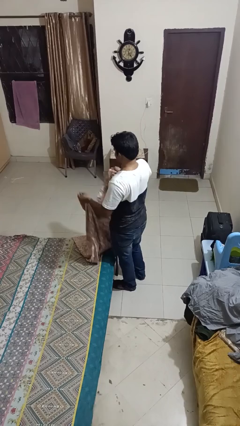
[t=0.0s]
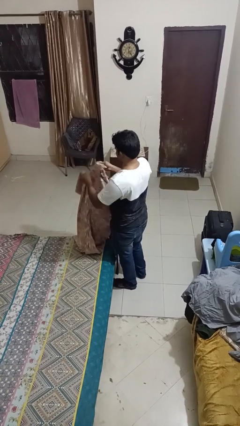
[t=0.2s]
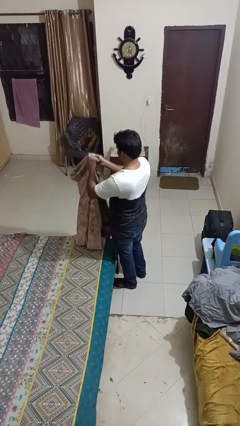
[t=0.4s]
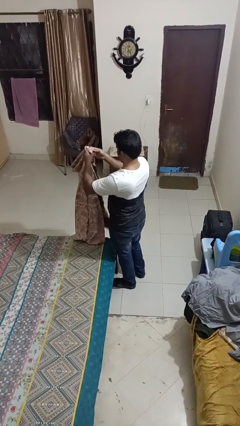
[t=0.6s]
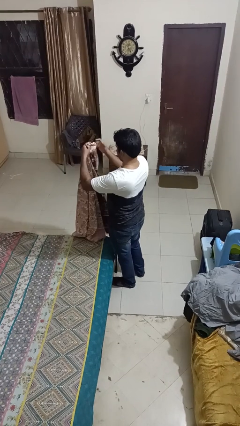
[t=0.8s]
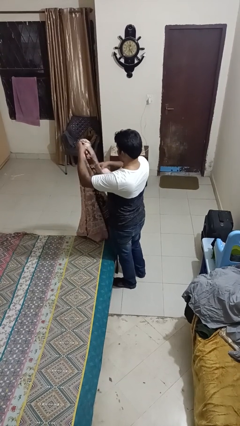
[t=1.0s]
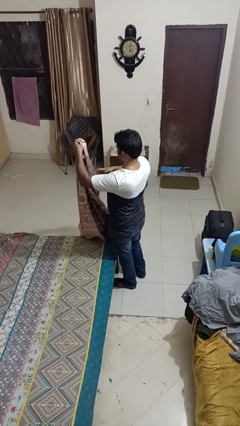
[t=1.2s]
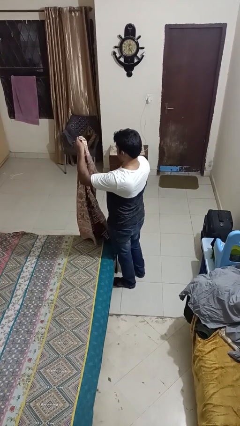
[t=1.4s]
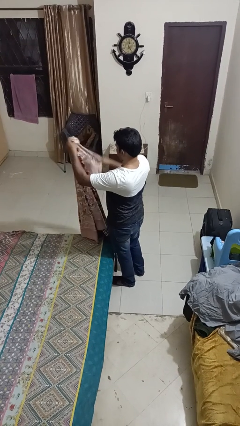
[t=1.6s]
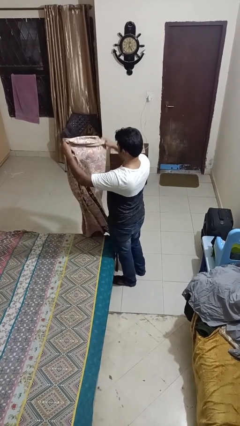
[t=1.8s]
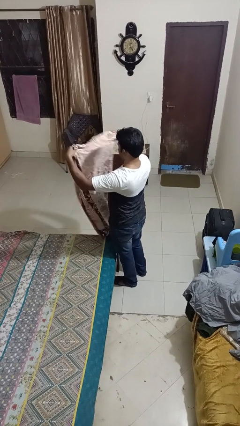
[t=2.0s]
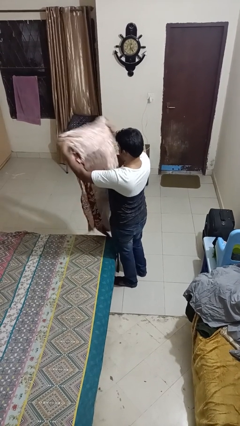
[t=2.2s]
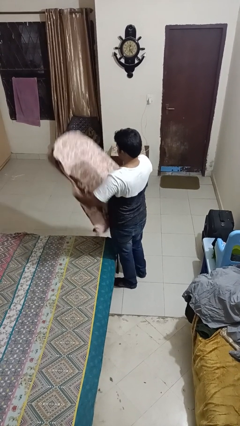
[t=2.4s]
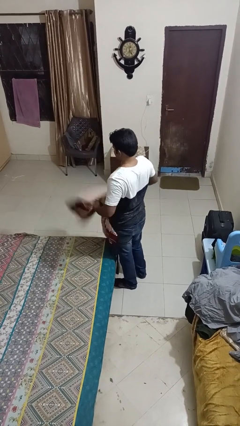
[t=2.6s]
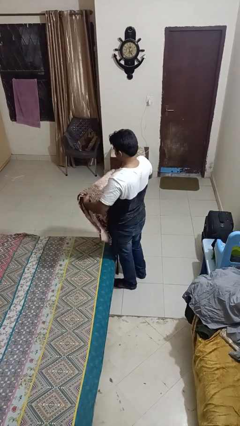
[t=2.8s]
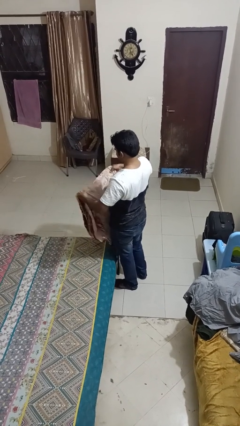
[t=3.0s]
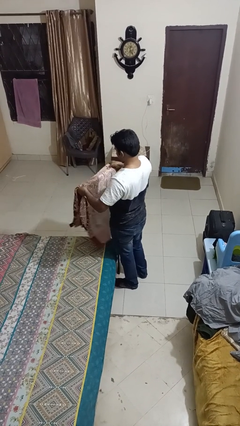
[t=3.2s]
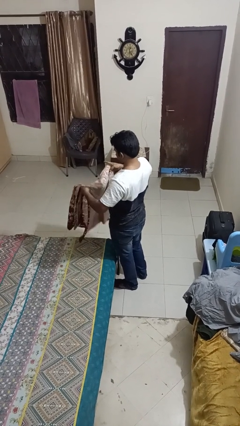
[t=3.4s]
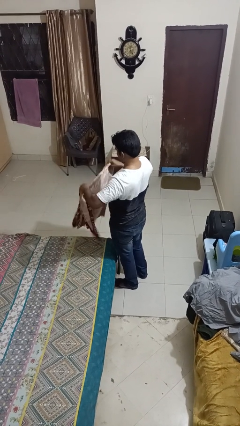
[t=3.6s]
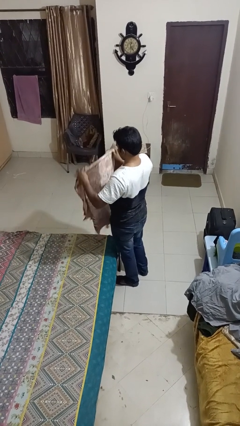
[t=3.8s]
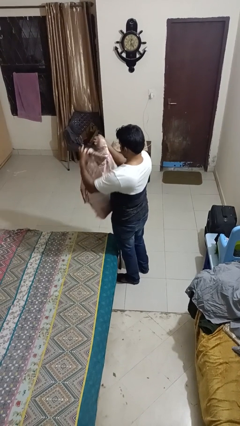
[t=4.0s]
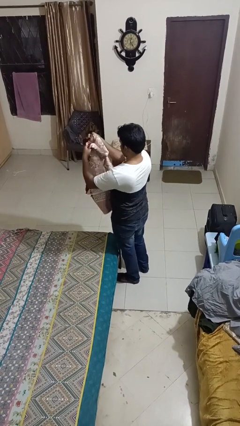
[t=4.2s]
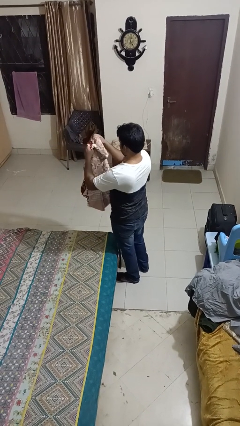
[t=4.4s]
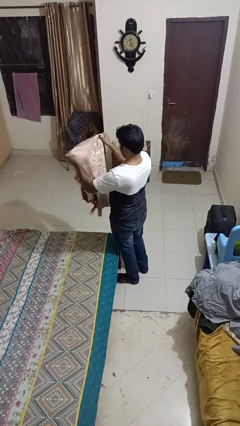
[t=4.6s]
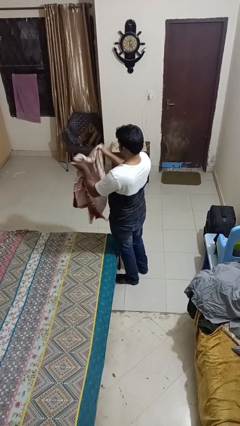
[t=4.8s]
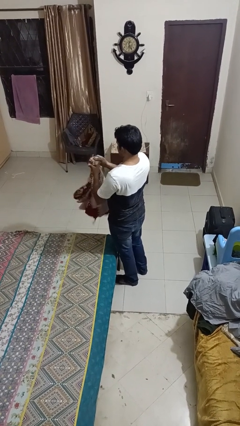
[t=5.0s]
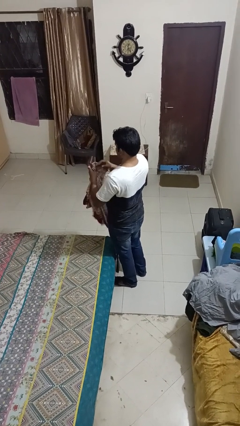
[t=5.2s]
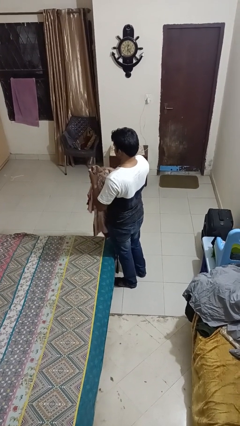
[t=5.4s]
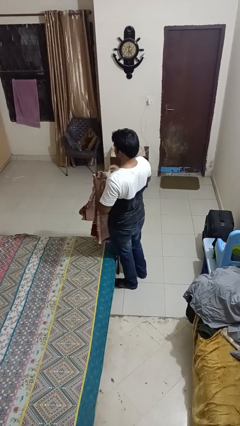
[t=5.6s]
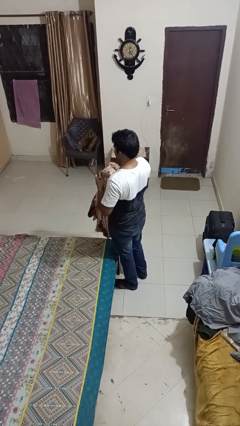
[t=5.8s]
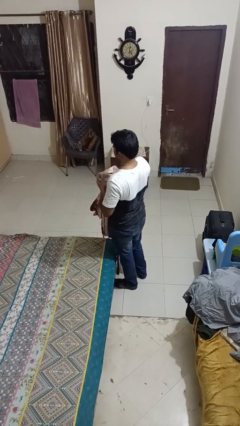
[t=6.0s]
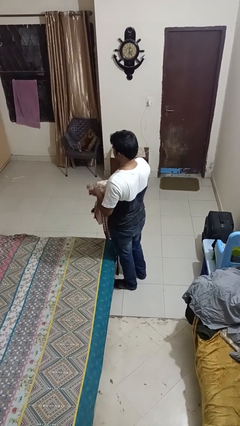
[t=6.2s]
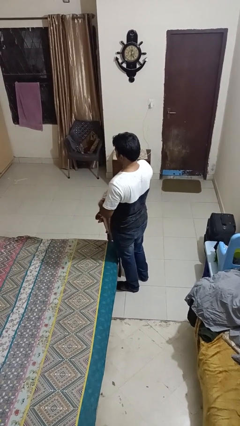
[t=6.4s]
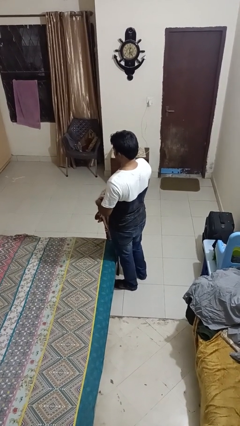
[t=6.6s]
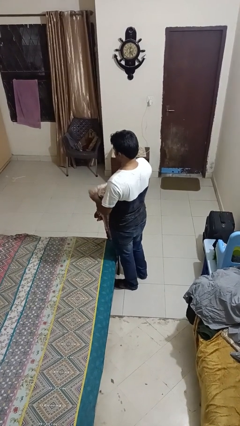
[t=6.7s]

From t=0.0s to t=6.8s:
person folds blanket

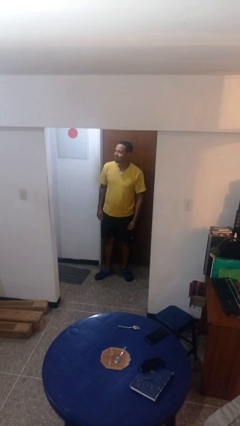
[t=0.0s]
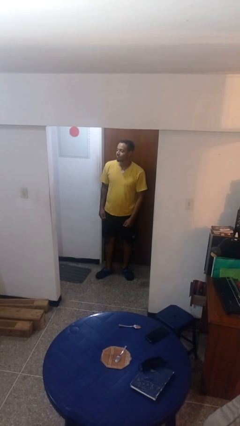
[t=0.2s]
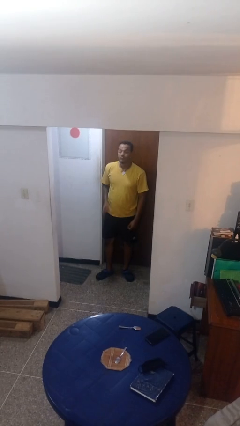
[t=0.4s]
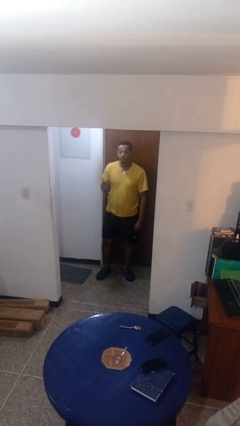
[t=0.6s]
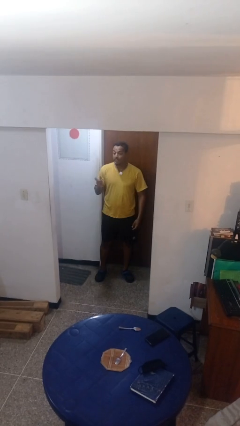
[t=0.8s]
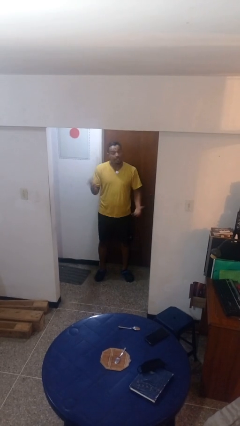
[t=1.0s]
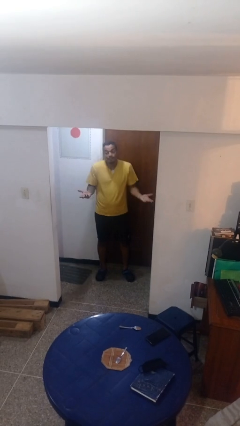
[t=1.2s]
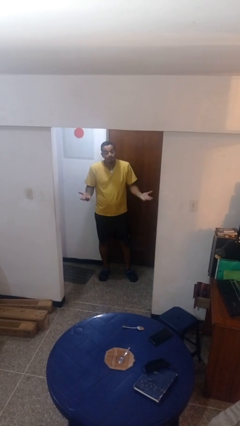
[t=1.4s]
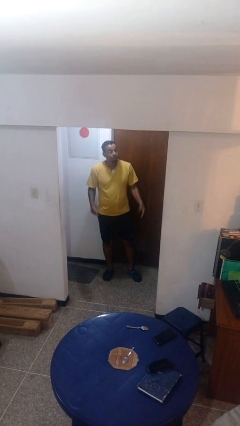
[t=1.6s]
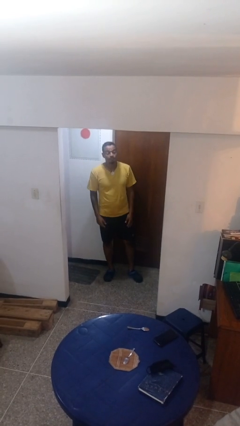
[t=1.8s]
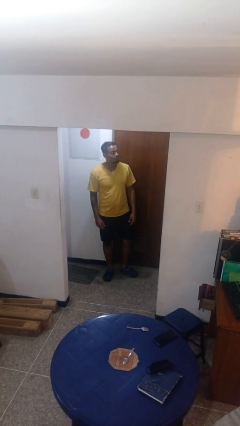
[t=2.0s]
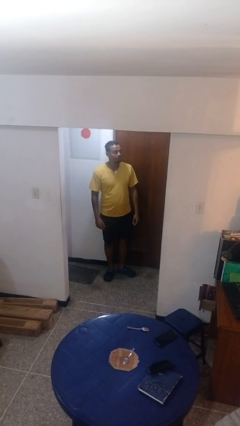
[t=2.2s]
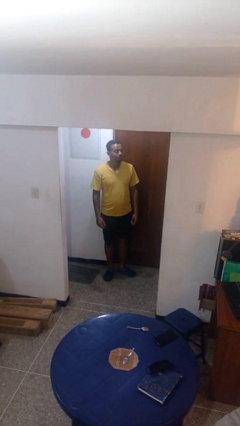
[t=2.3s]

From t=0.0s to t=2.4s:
person shakes head

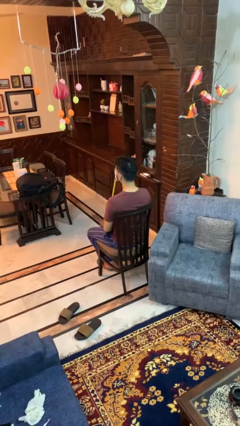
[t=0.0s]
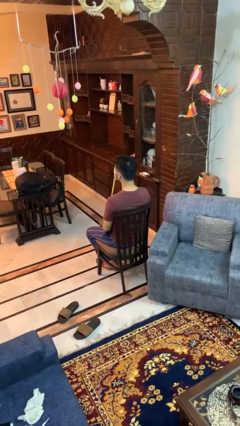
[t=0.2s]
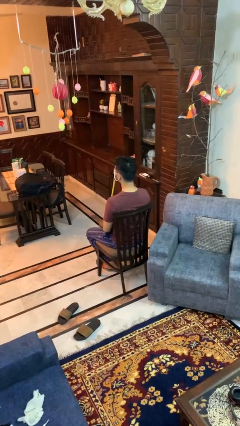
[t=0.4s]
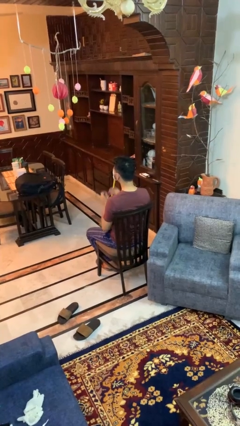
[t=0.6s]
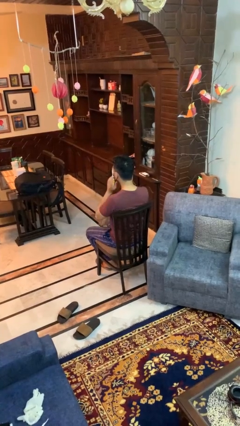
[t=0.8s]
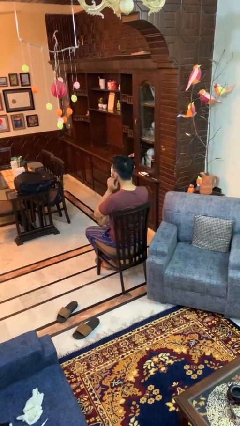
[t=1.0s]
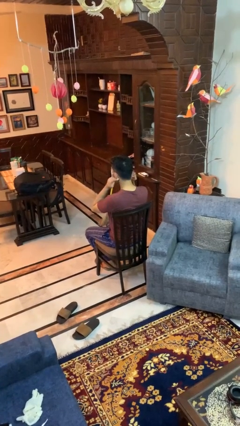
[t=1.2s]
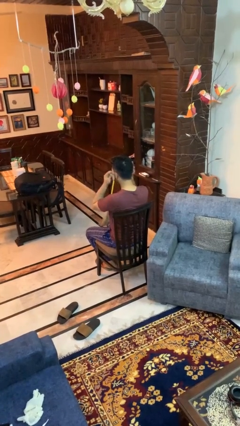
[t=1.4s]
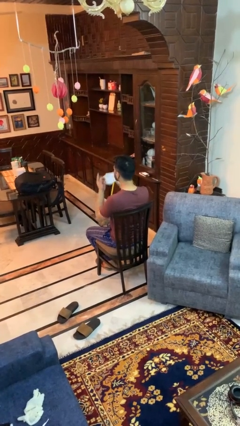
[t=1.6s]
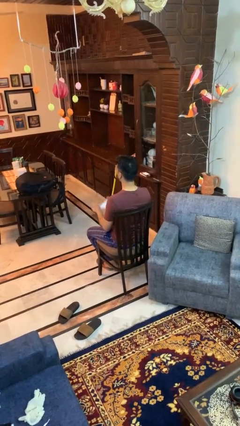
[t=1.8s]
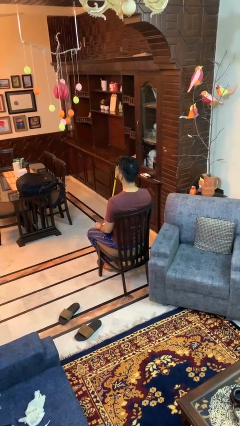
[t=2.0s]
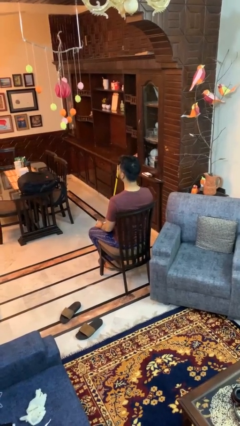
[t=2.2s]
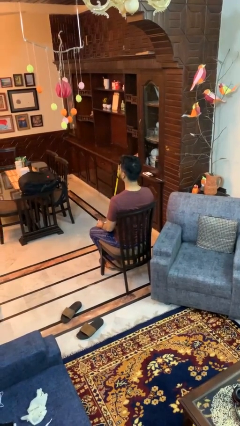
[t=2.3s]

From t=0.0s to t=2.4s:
person takes off facemask

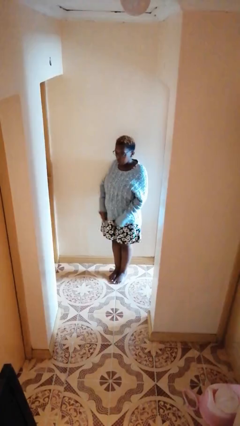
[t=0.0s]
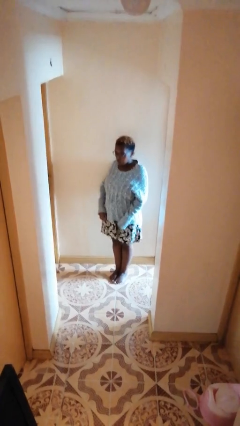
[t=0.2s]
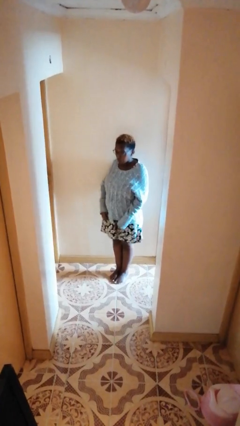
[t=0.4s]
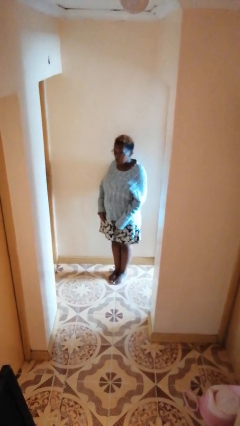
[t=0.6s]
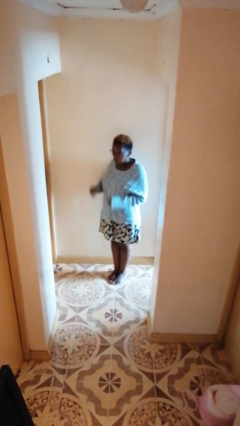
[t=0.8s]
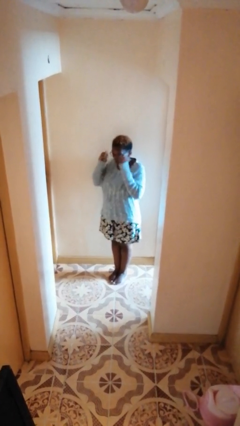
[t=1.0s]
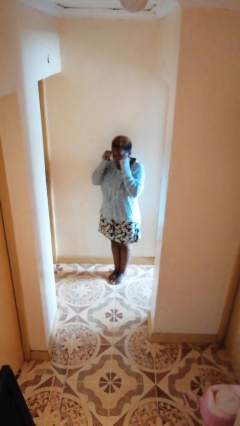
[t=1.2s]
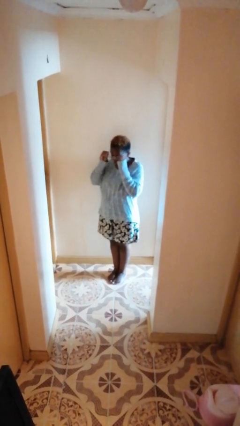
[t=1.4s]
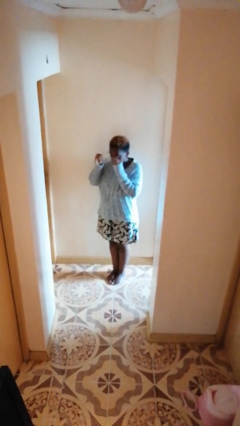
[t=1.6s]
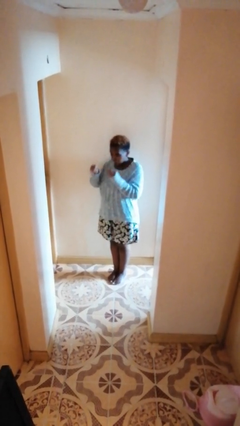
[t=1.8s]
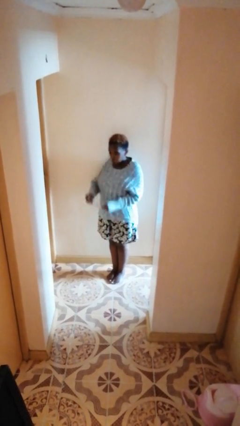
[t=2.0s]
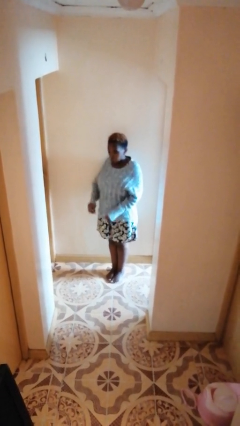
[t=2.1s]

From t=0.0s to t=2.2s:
person takes off glasses

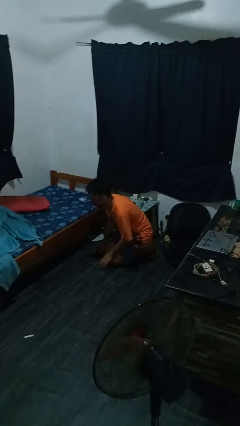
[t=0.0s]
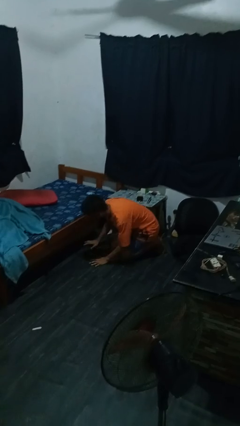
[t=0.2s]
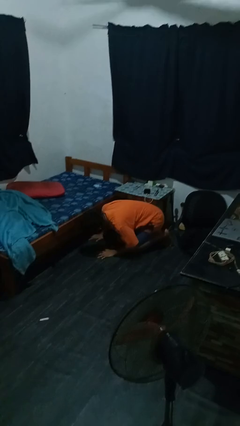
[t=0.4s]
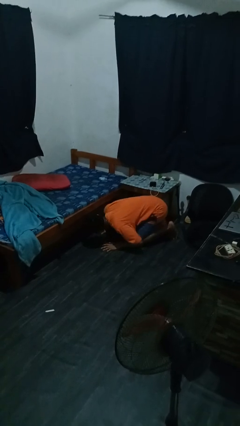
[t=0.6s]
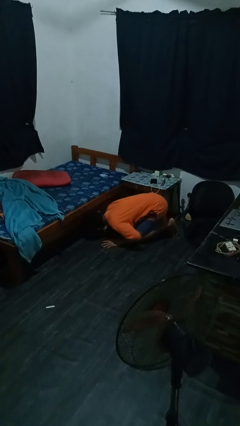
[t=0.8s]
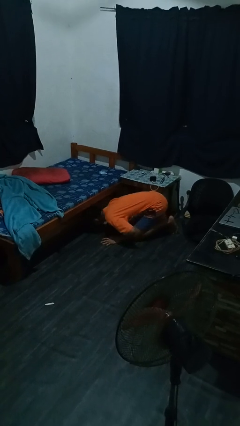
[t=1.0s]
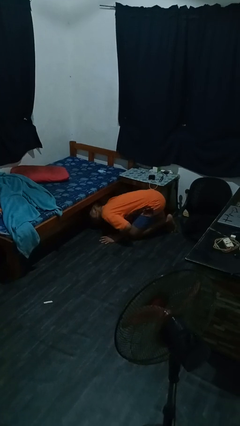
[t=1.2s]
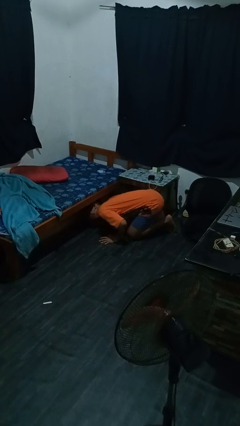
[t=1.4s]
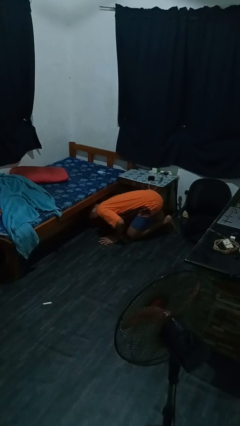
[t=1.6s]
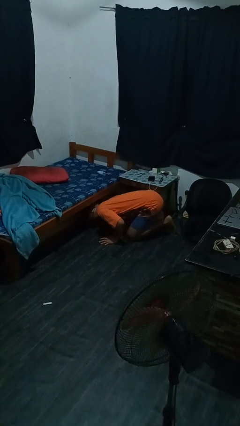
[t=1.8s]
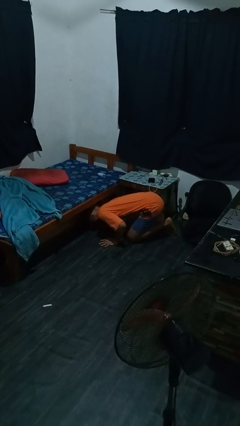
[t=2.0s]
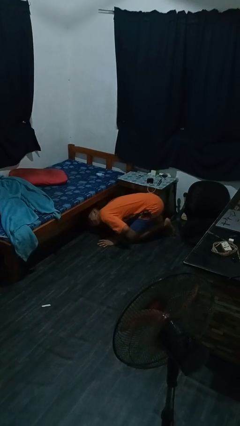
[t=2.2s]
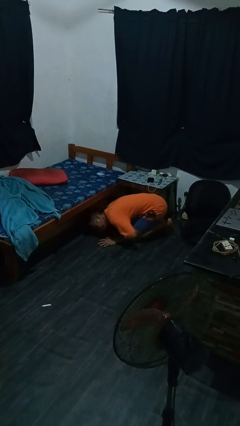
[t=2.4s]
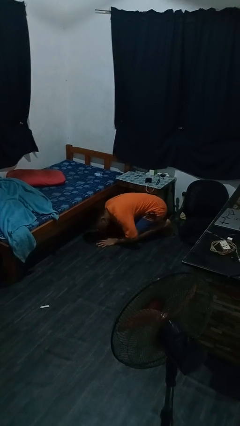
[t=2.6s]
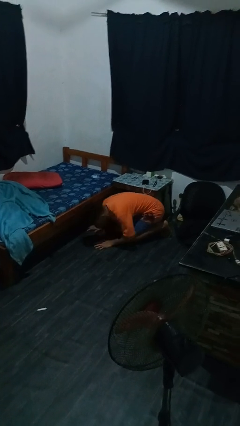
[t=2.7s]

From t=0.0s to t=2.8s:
person searches under bed

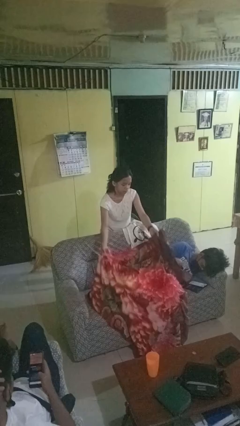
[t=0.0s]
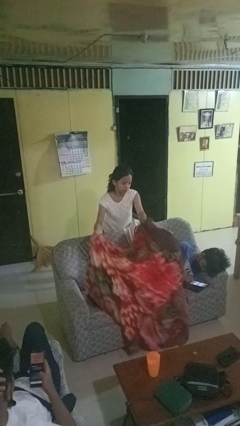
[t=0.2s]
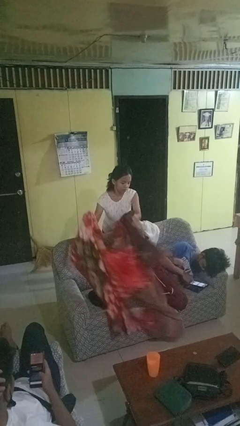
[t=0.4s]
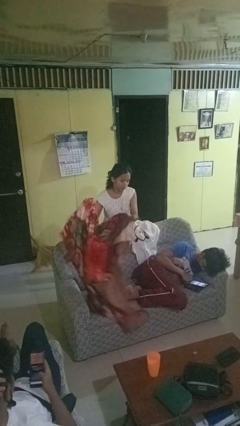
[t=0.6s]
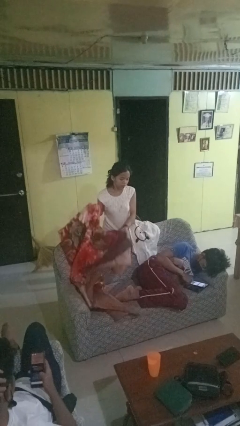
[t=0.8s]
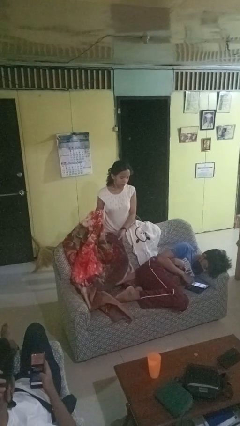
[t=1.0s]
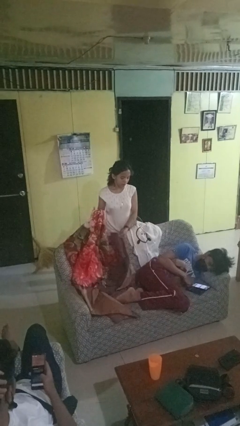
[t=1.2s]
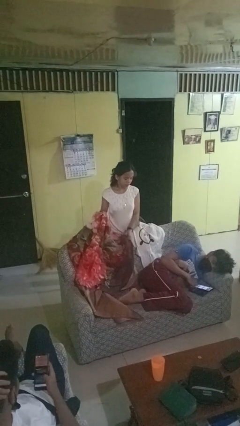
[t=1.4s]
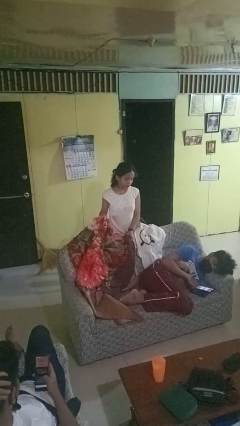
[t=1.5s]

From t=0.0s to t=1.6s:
person uncovers friend with blanket
